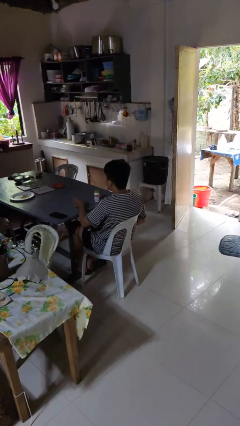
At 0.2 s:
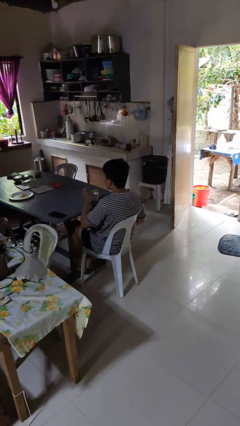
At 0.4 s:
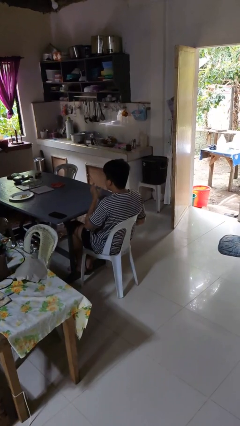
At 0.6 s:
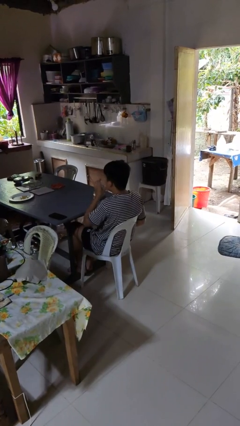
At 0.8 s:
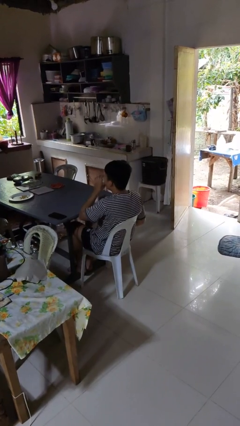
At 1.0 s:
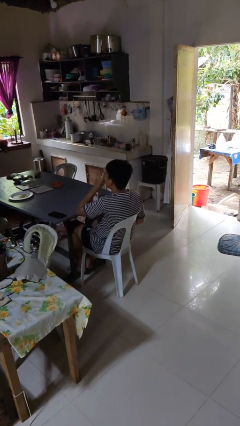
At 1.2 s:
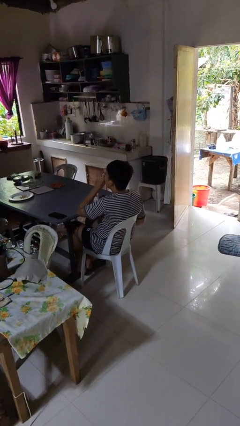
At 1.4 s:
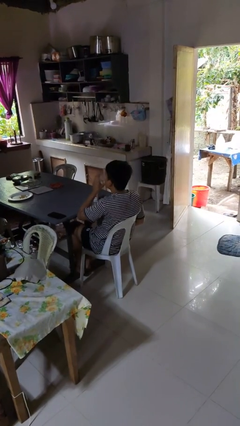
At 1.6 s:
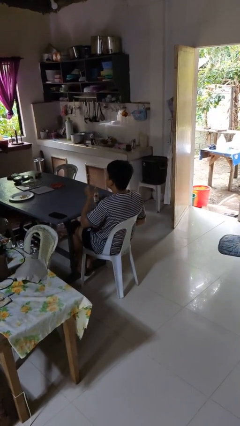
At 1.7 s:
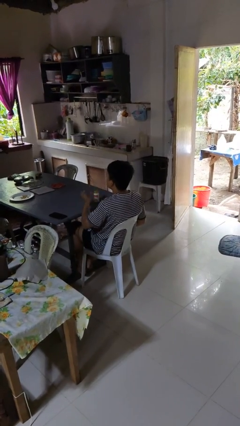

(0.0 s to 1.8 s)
person drinks from cup

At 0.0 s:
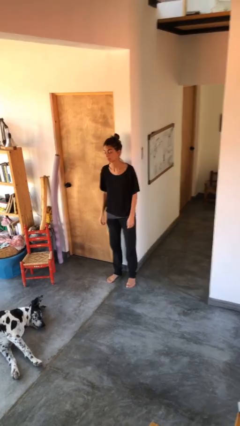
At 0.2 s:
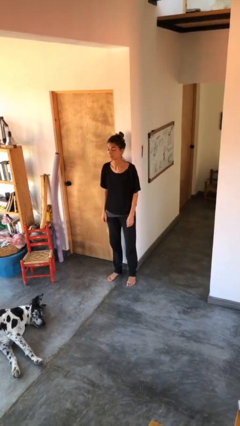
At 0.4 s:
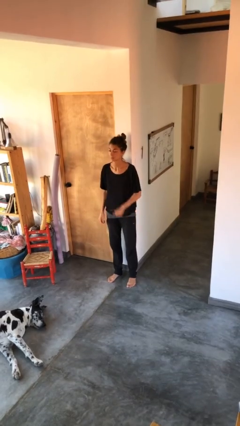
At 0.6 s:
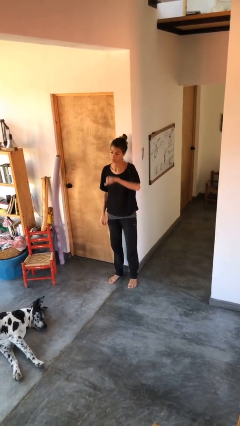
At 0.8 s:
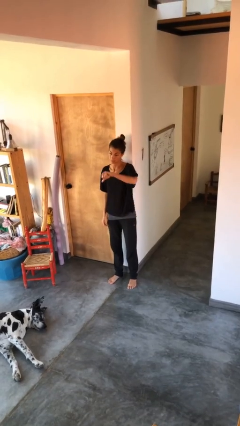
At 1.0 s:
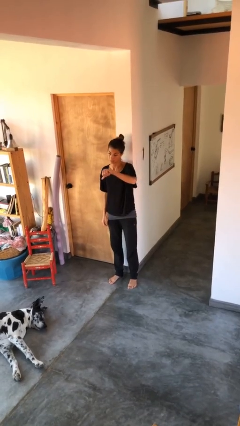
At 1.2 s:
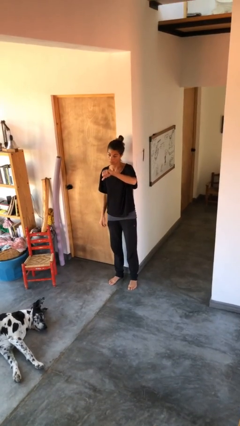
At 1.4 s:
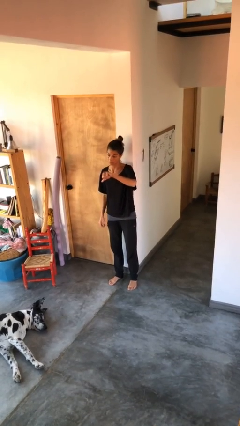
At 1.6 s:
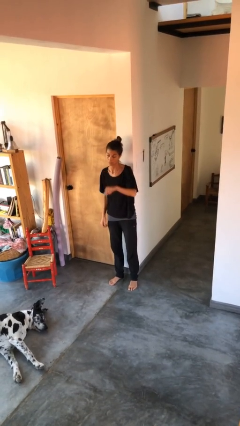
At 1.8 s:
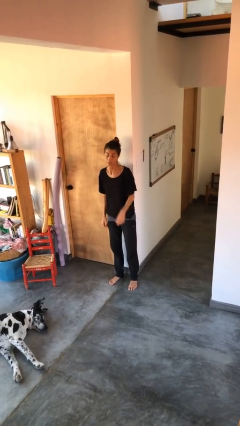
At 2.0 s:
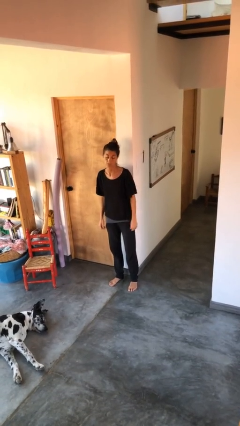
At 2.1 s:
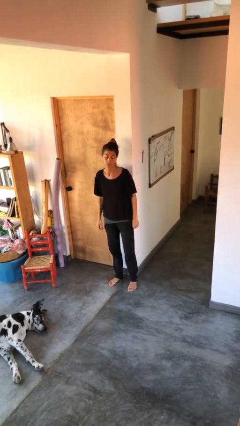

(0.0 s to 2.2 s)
person gestures thumbs down

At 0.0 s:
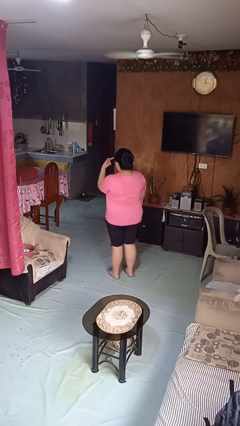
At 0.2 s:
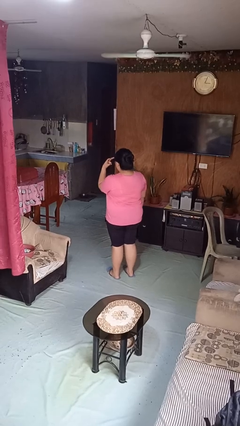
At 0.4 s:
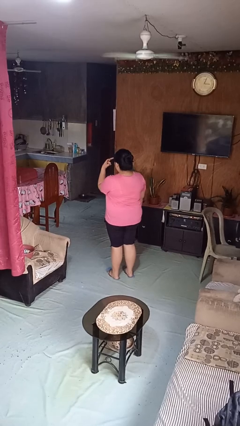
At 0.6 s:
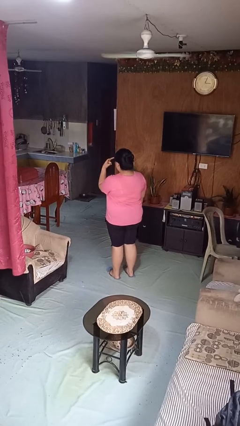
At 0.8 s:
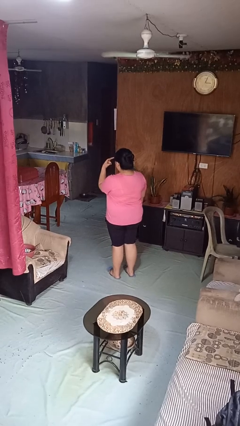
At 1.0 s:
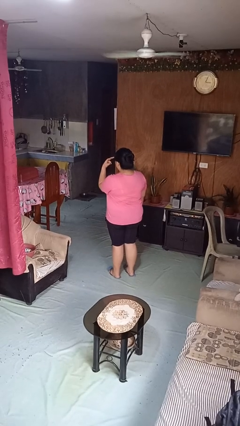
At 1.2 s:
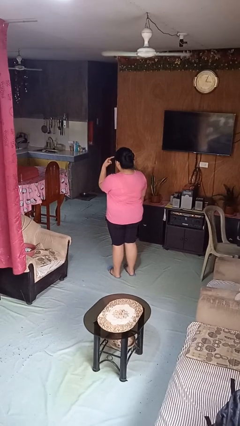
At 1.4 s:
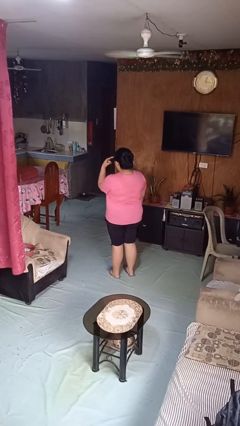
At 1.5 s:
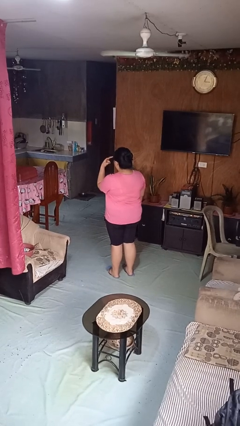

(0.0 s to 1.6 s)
person gestures watch closely

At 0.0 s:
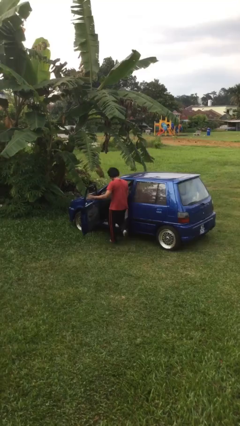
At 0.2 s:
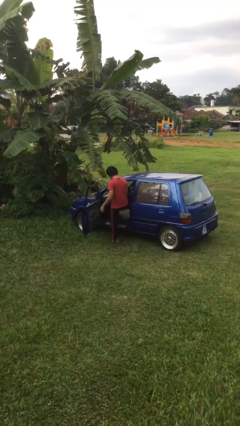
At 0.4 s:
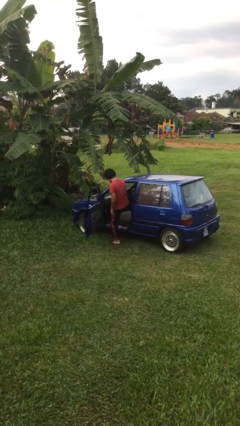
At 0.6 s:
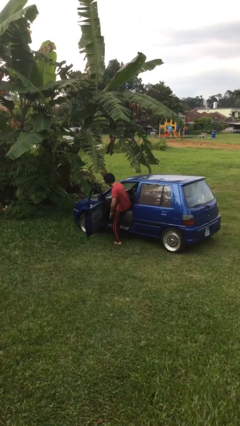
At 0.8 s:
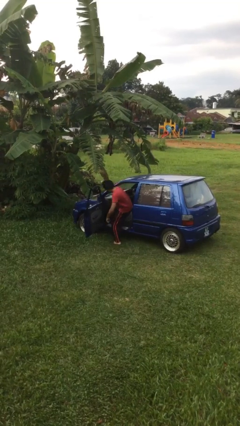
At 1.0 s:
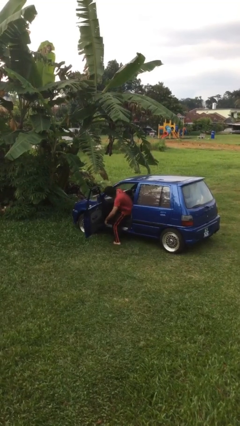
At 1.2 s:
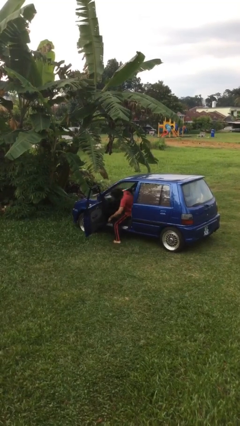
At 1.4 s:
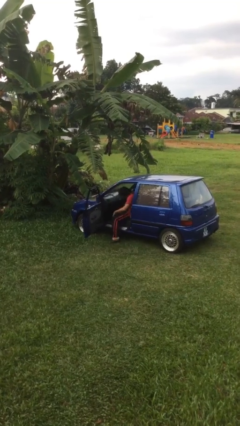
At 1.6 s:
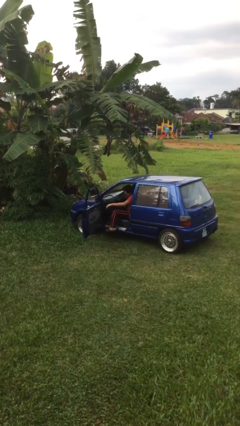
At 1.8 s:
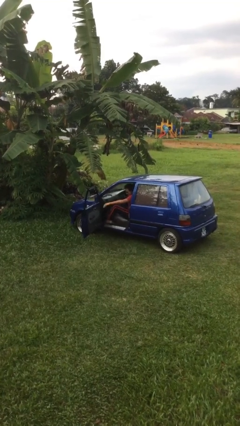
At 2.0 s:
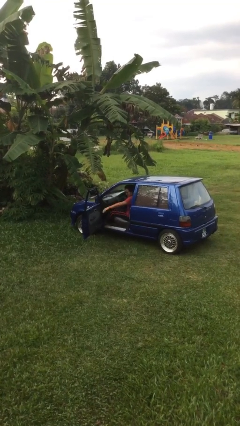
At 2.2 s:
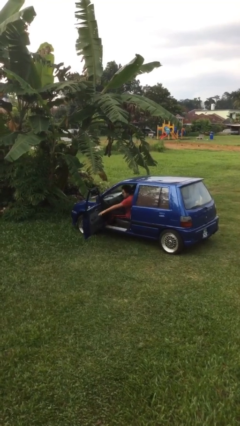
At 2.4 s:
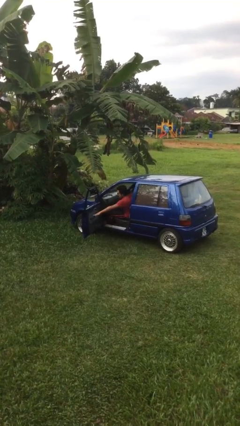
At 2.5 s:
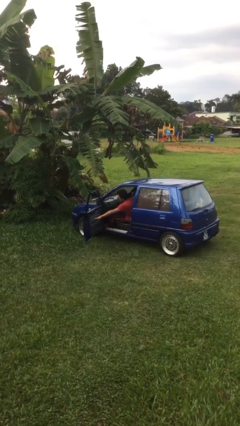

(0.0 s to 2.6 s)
person enters car

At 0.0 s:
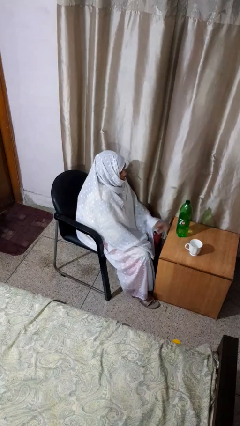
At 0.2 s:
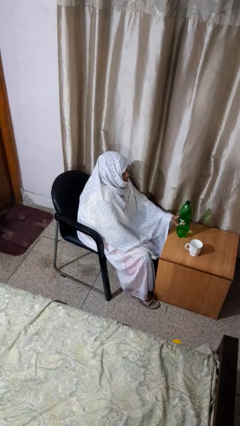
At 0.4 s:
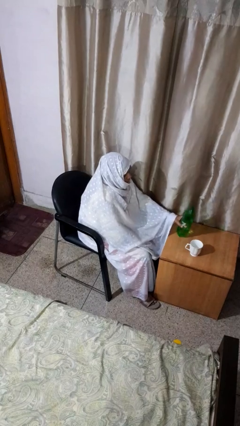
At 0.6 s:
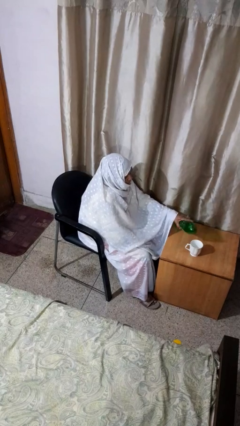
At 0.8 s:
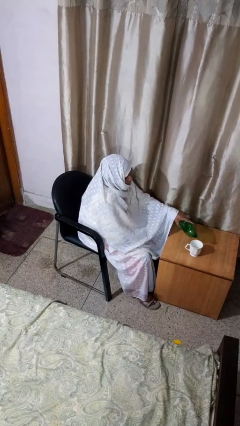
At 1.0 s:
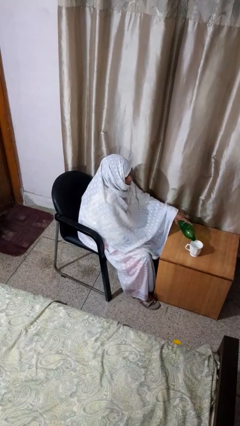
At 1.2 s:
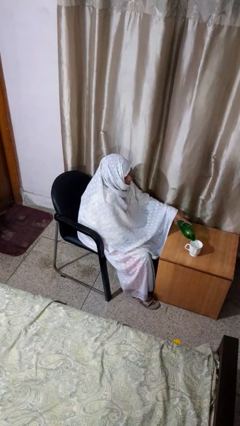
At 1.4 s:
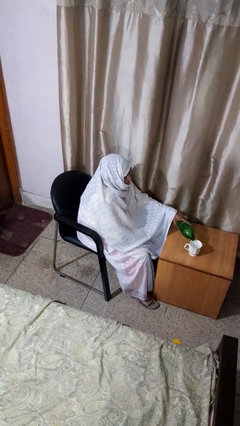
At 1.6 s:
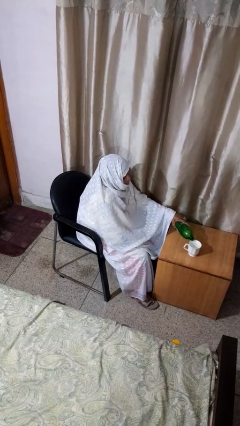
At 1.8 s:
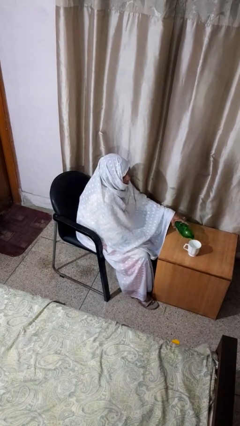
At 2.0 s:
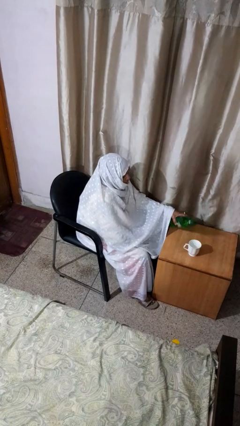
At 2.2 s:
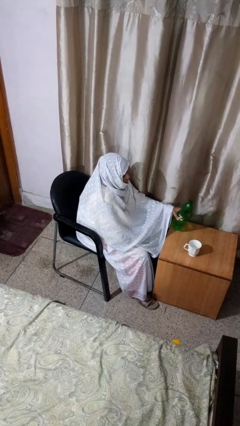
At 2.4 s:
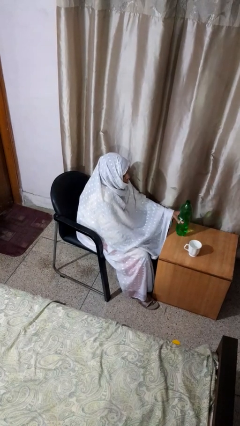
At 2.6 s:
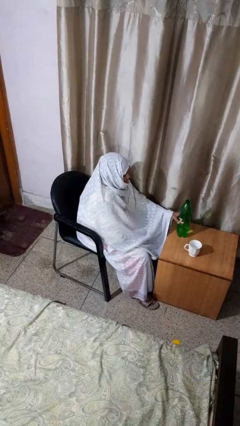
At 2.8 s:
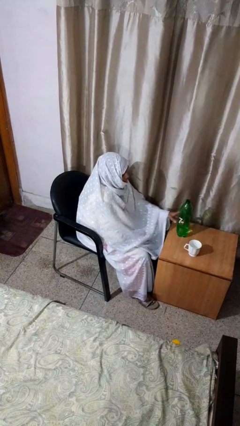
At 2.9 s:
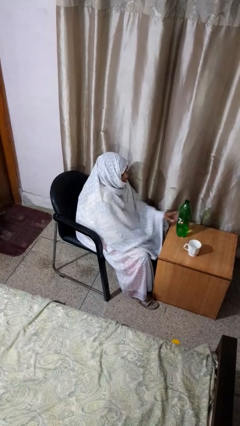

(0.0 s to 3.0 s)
person pours liquid into cup

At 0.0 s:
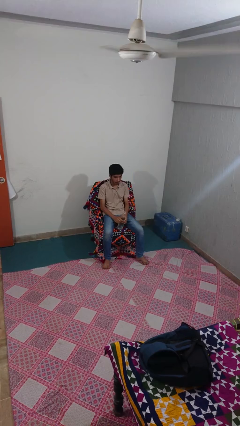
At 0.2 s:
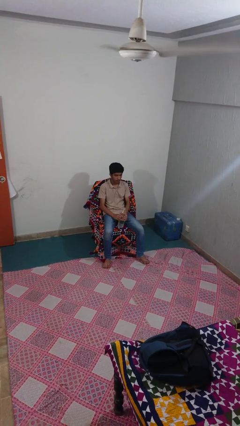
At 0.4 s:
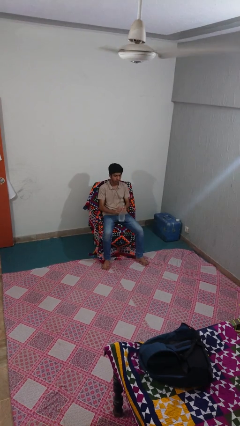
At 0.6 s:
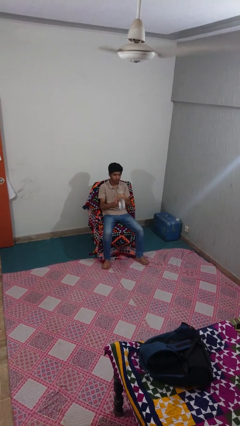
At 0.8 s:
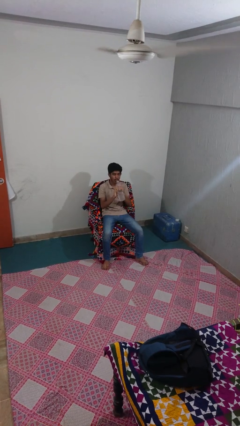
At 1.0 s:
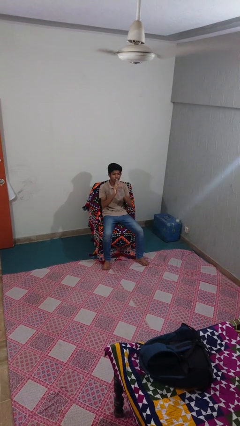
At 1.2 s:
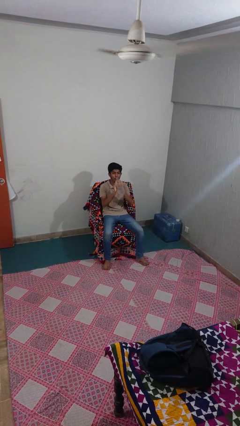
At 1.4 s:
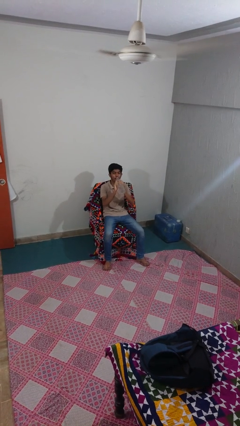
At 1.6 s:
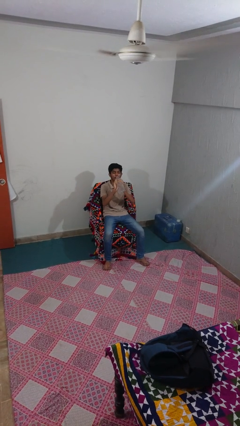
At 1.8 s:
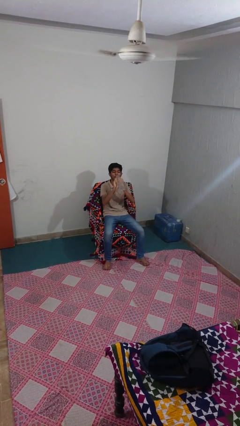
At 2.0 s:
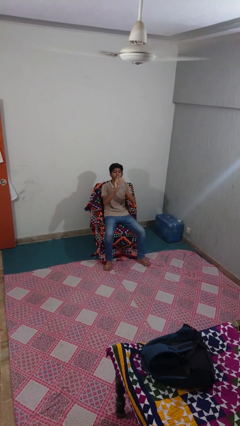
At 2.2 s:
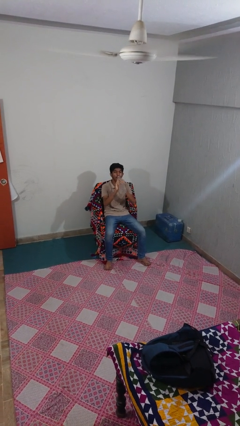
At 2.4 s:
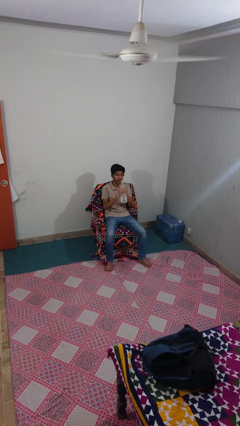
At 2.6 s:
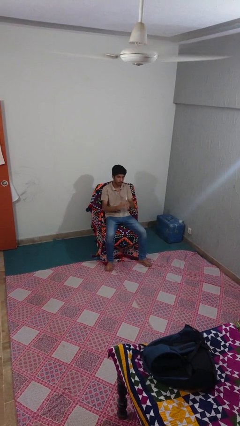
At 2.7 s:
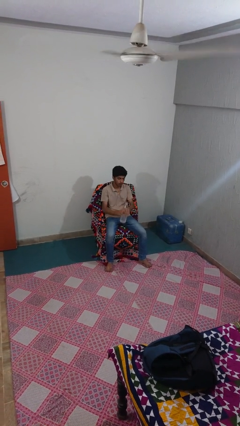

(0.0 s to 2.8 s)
person drinks from bottle

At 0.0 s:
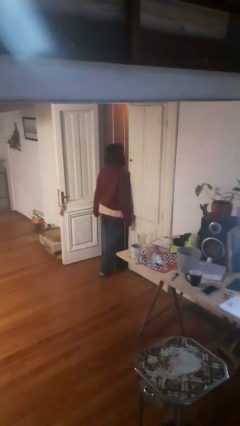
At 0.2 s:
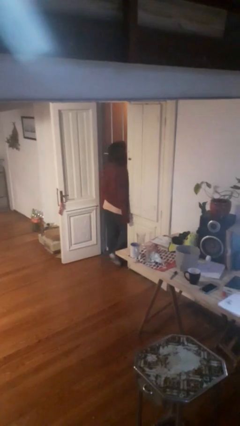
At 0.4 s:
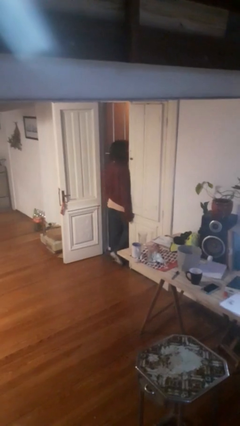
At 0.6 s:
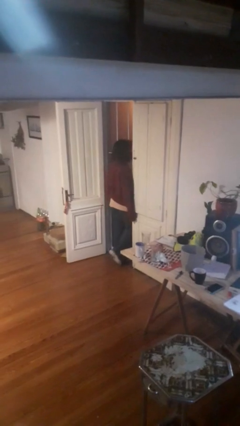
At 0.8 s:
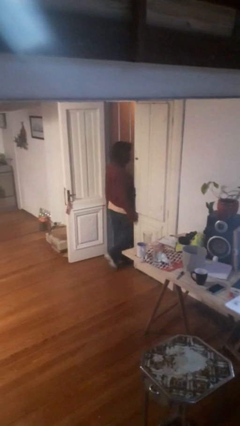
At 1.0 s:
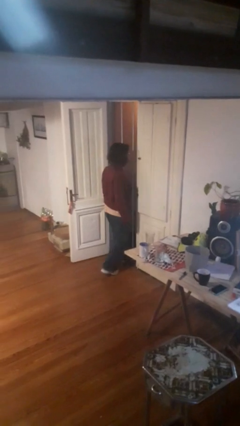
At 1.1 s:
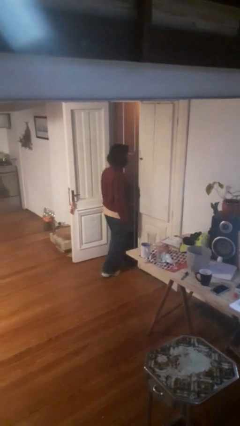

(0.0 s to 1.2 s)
person bumps into wall

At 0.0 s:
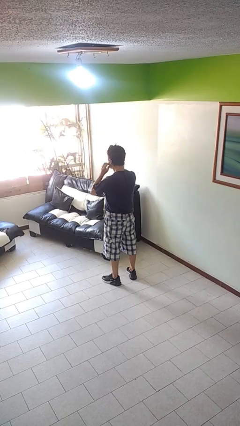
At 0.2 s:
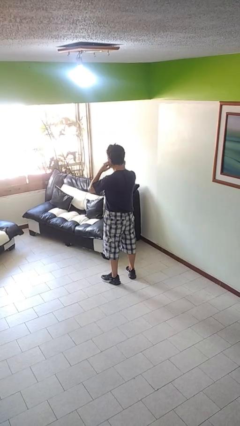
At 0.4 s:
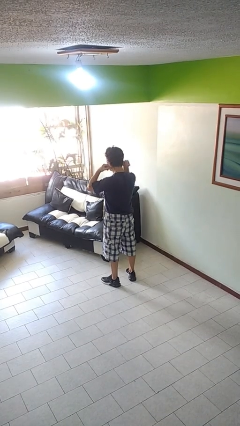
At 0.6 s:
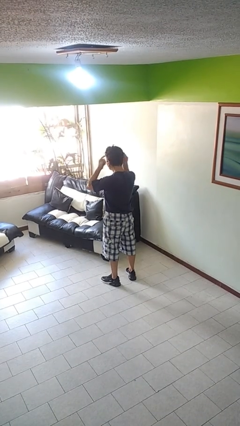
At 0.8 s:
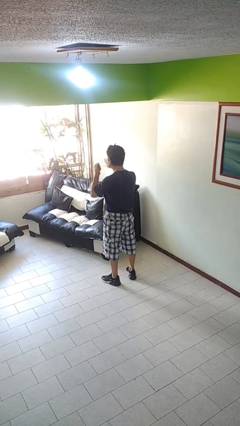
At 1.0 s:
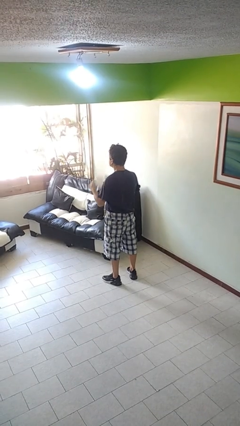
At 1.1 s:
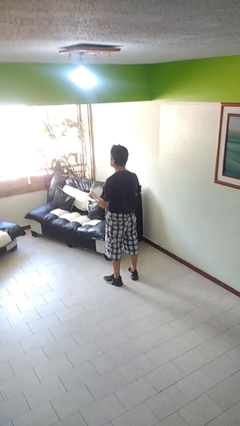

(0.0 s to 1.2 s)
person takes off facemask

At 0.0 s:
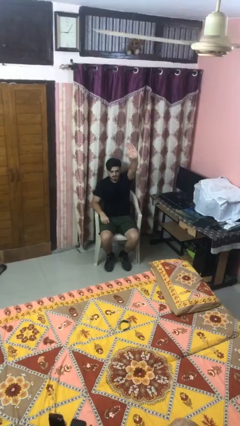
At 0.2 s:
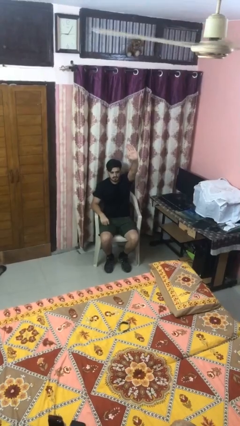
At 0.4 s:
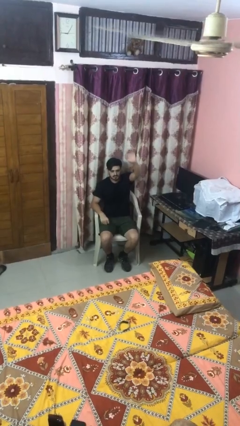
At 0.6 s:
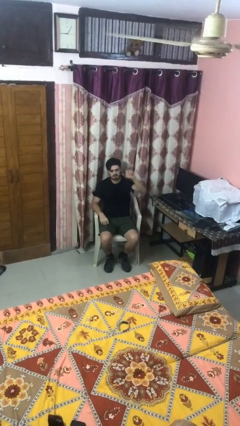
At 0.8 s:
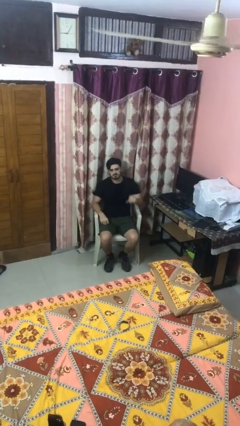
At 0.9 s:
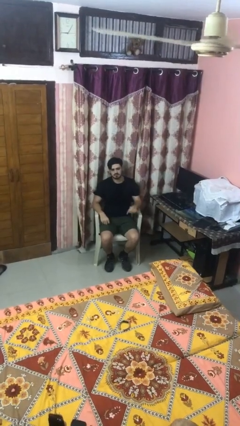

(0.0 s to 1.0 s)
person gestures lower hand
